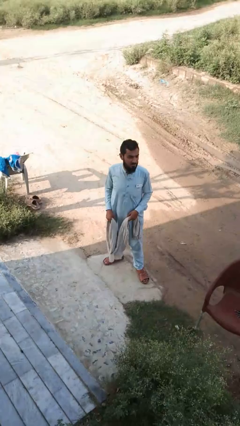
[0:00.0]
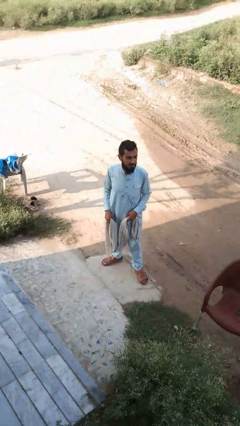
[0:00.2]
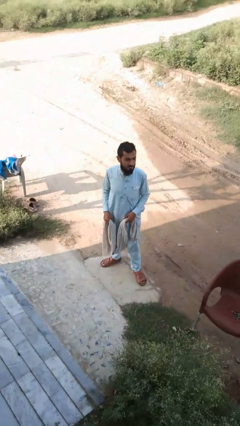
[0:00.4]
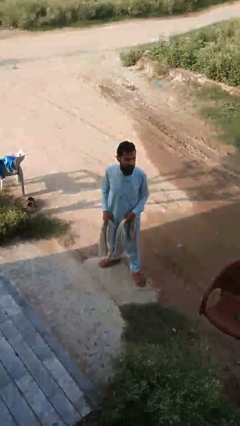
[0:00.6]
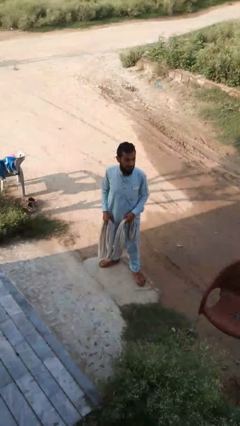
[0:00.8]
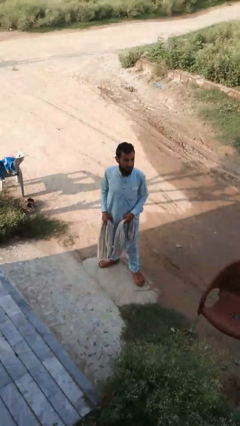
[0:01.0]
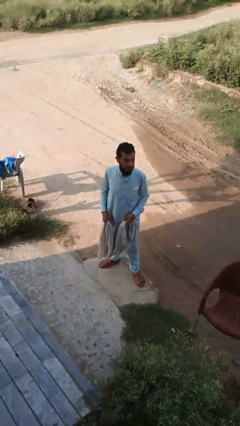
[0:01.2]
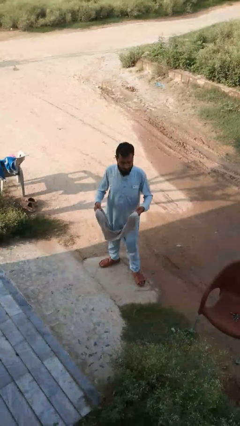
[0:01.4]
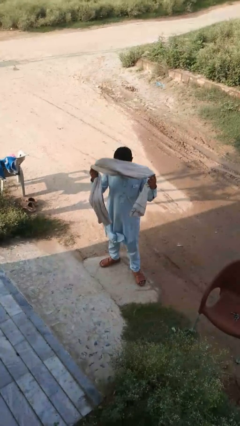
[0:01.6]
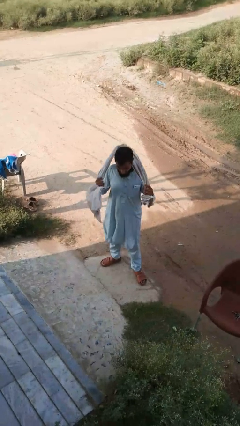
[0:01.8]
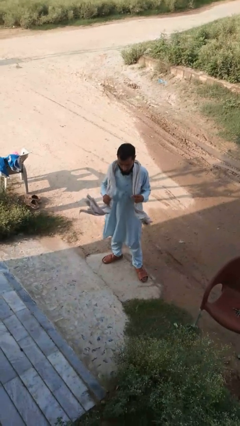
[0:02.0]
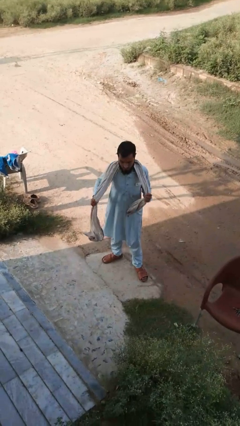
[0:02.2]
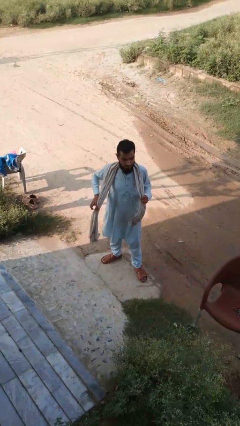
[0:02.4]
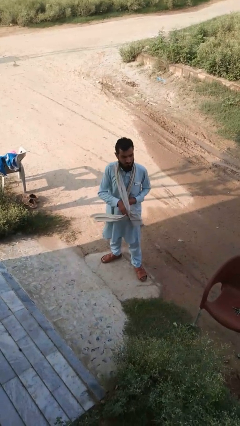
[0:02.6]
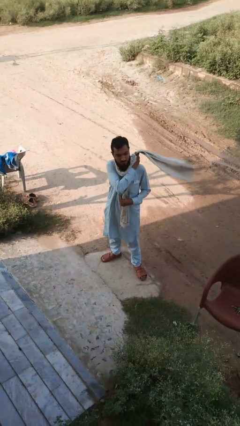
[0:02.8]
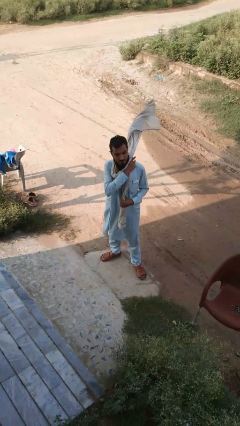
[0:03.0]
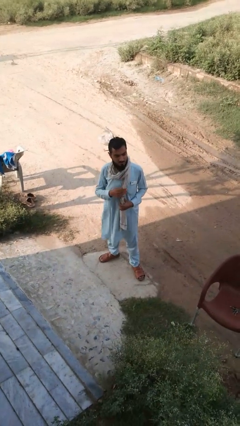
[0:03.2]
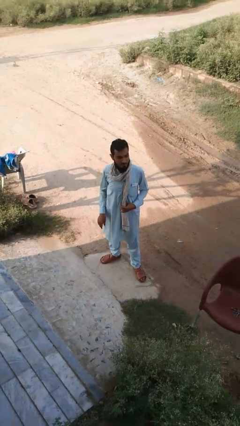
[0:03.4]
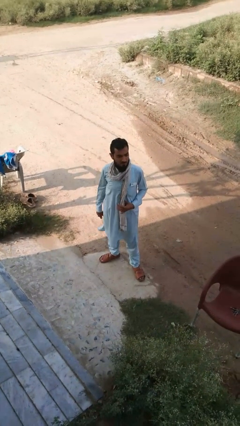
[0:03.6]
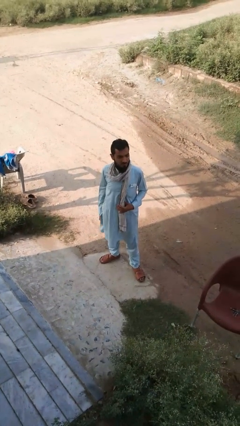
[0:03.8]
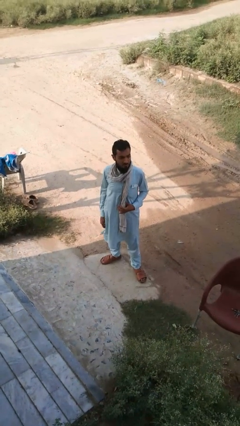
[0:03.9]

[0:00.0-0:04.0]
person puts on scarf

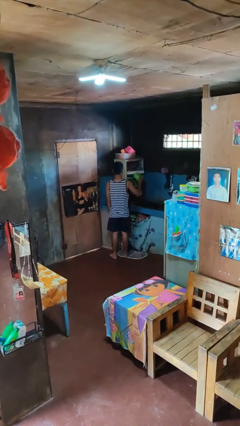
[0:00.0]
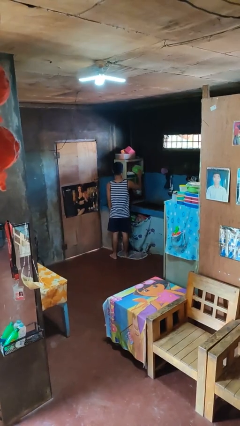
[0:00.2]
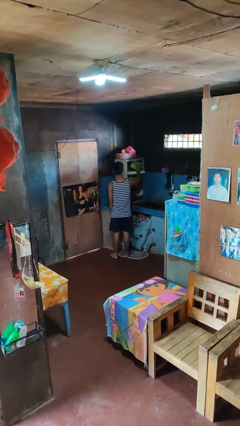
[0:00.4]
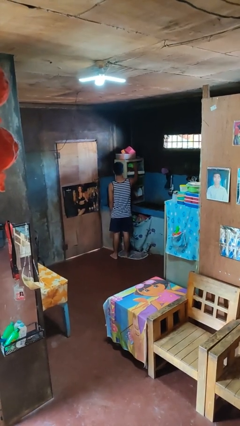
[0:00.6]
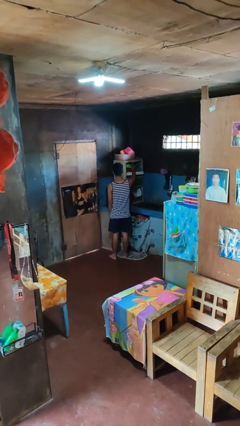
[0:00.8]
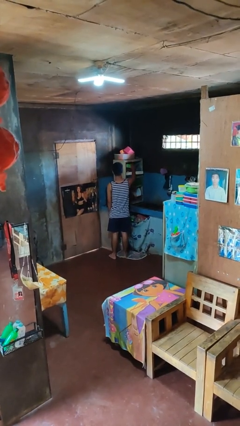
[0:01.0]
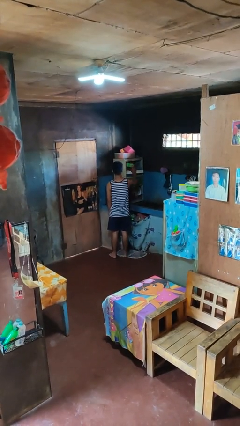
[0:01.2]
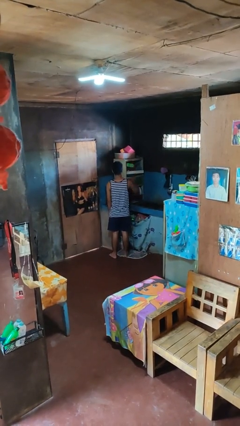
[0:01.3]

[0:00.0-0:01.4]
person puts object in cabinet

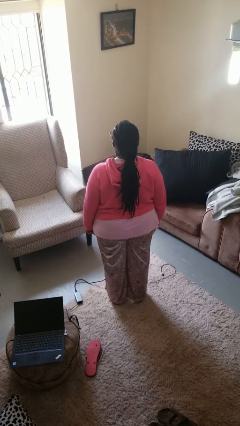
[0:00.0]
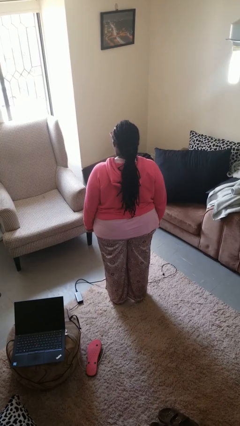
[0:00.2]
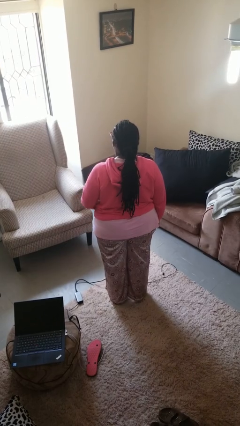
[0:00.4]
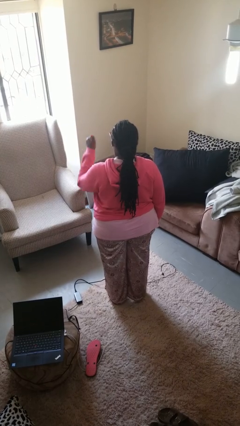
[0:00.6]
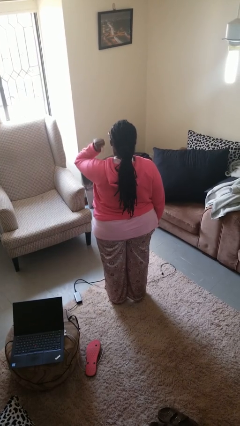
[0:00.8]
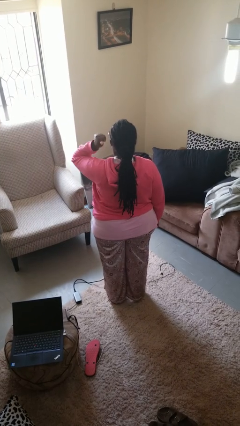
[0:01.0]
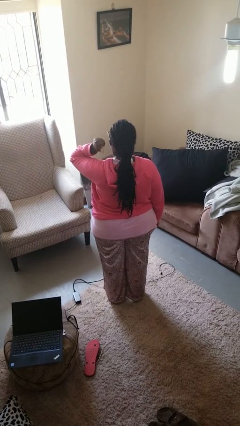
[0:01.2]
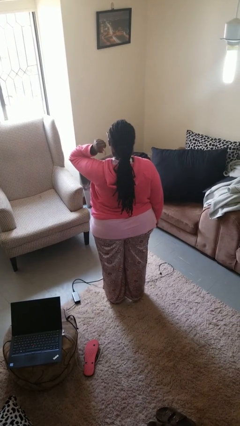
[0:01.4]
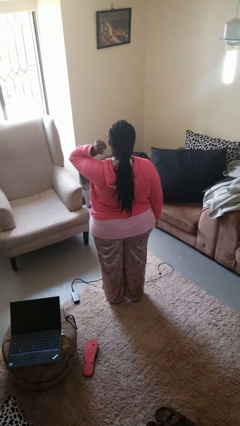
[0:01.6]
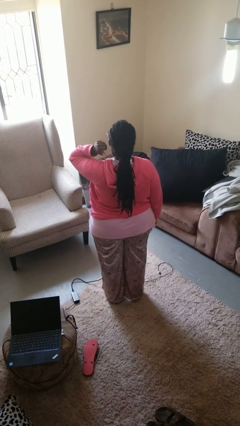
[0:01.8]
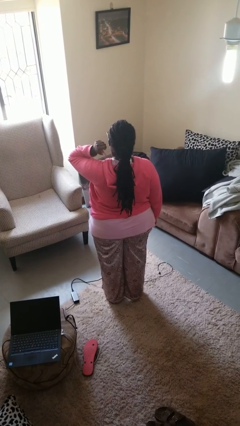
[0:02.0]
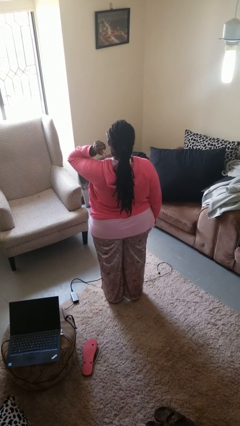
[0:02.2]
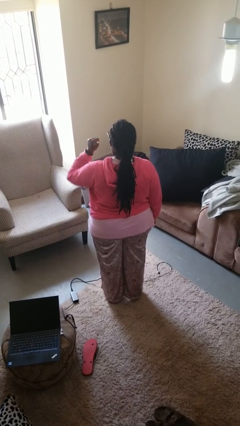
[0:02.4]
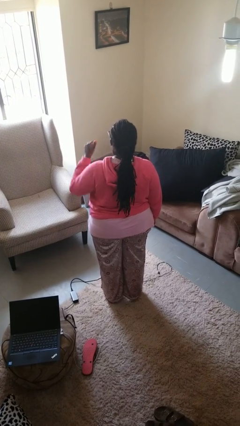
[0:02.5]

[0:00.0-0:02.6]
person gestures behind me

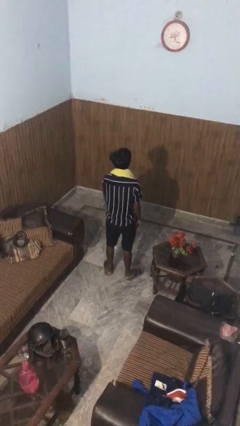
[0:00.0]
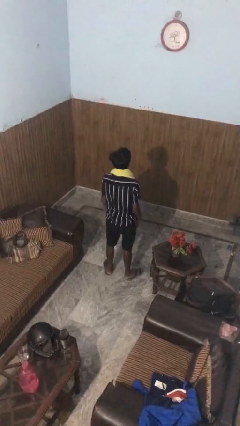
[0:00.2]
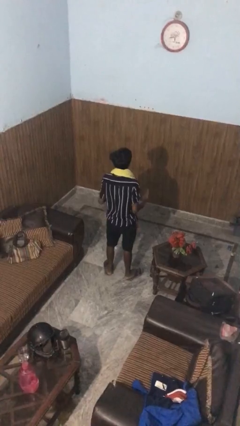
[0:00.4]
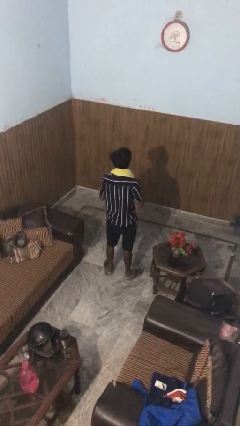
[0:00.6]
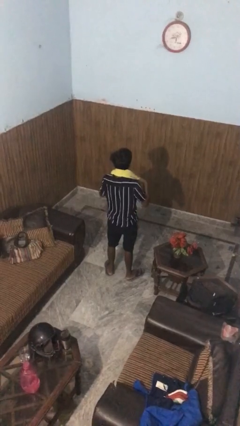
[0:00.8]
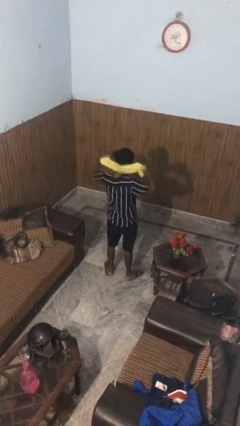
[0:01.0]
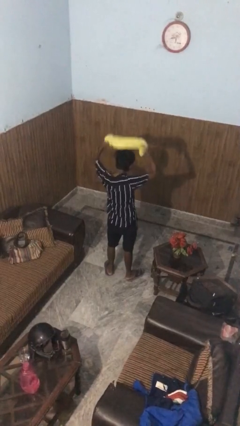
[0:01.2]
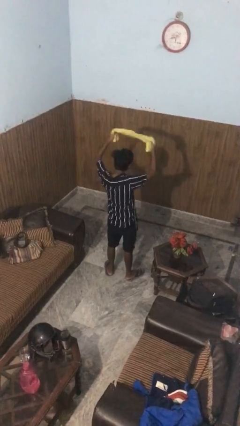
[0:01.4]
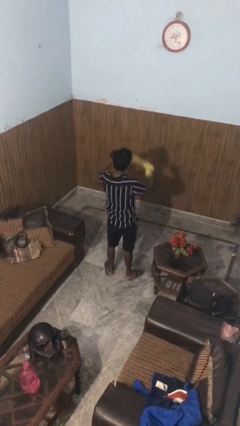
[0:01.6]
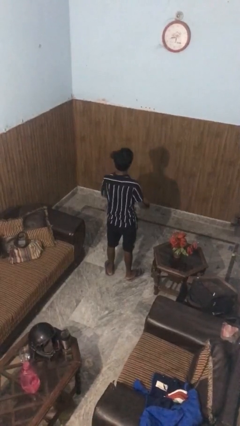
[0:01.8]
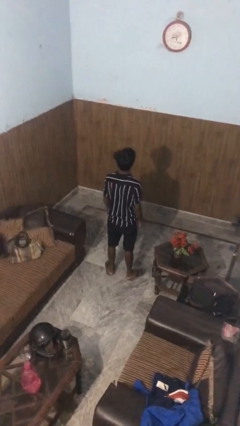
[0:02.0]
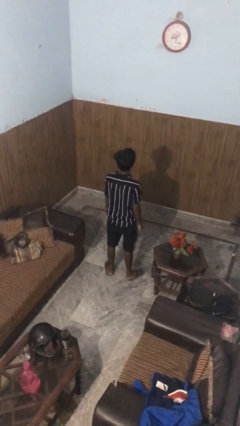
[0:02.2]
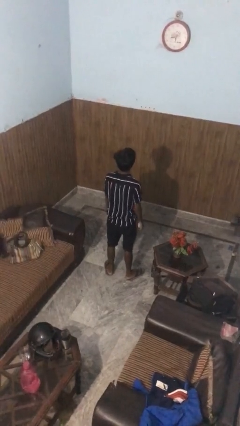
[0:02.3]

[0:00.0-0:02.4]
person takes off scarf

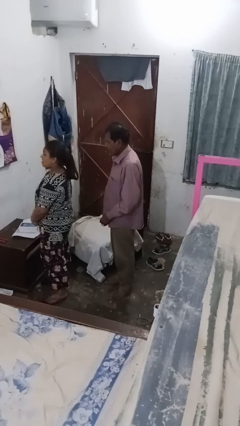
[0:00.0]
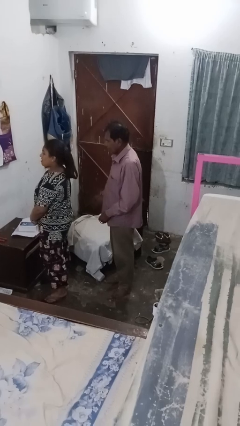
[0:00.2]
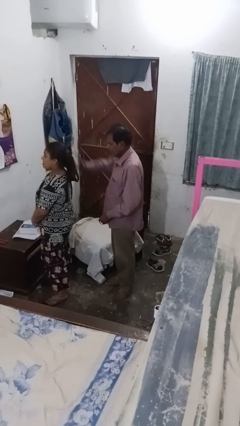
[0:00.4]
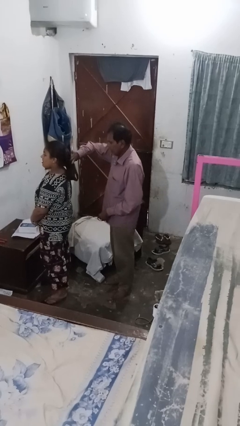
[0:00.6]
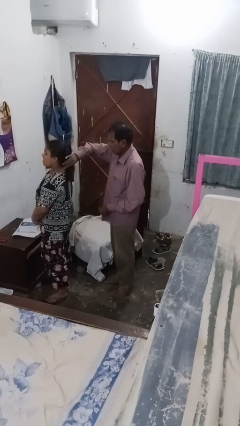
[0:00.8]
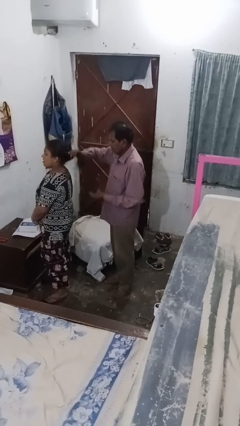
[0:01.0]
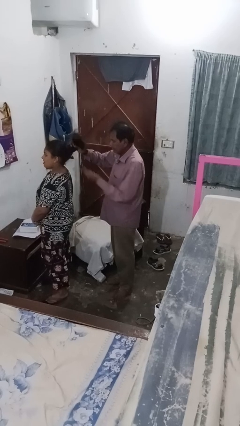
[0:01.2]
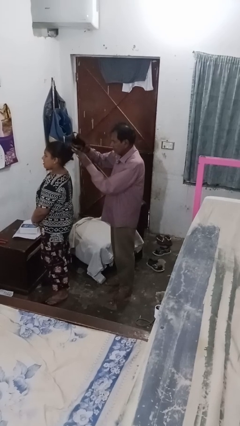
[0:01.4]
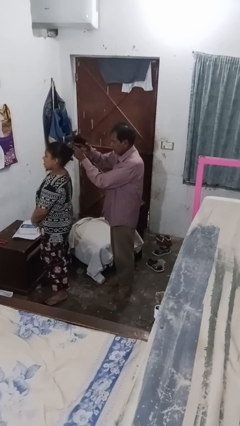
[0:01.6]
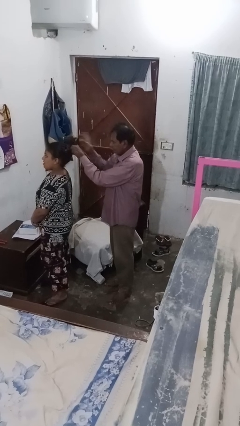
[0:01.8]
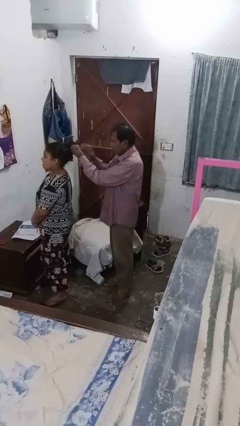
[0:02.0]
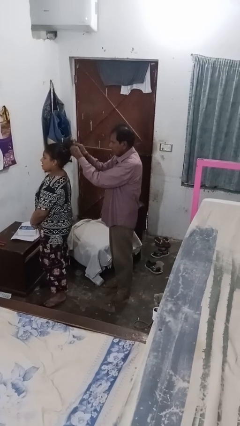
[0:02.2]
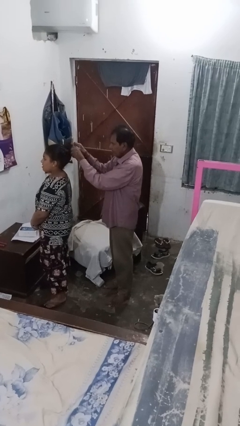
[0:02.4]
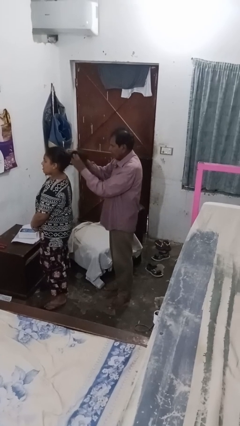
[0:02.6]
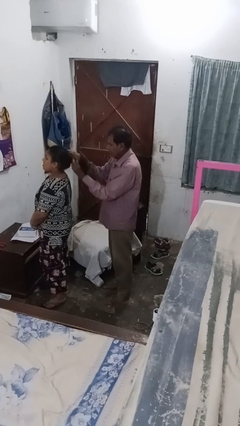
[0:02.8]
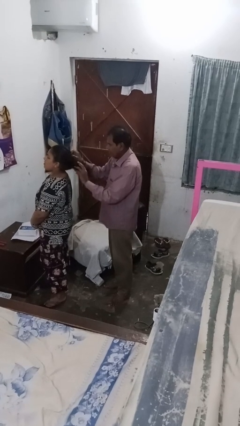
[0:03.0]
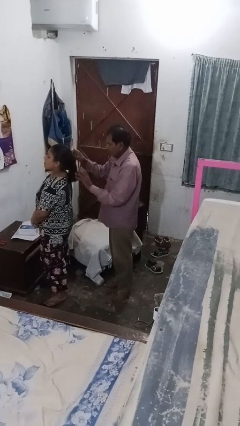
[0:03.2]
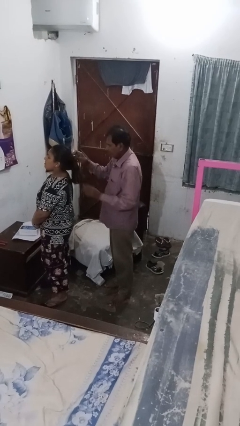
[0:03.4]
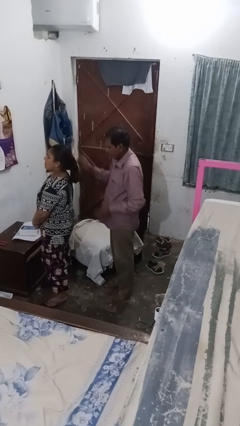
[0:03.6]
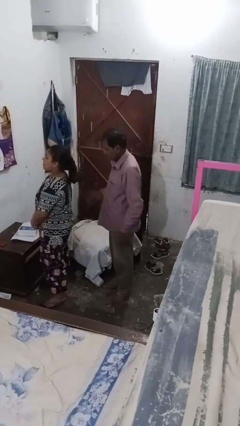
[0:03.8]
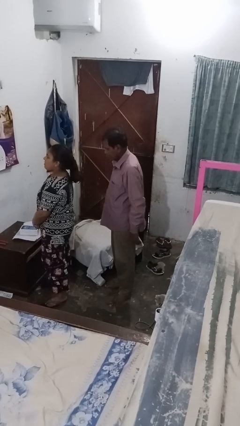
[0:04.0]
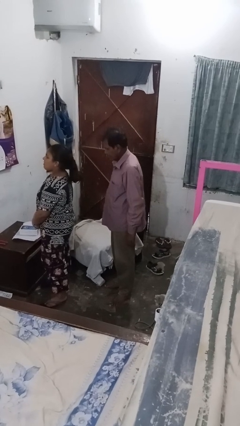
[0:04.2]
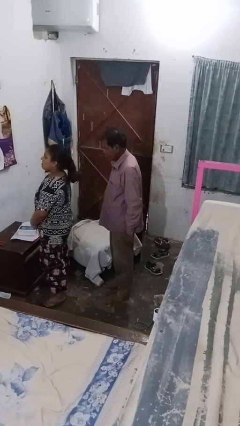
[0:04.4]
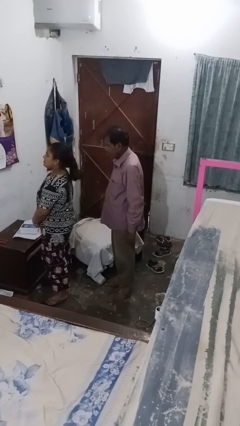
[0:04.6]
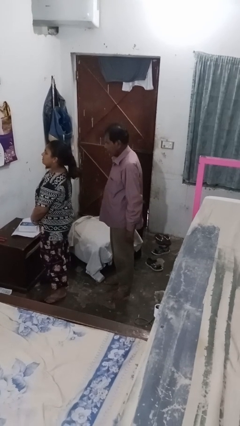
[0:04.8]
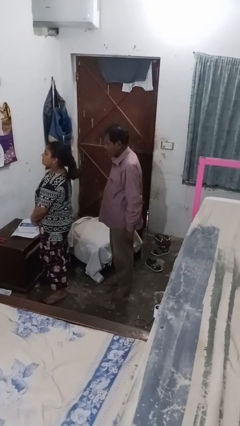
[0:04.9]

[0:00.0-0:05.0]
person braids hair of person

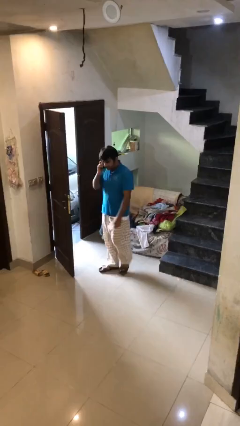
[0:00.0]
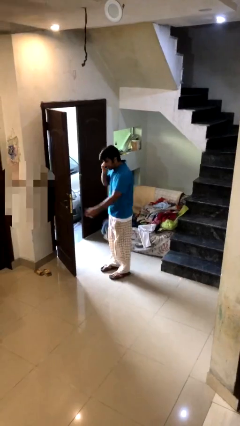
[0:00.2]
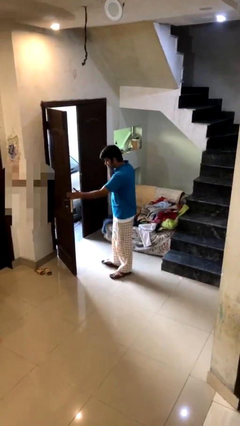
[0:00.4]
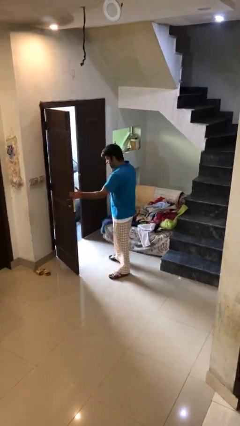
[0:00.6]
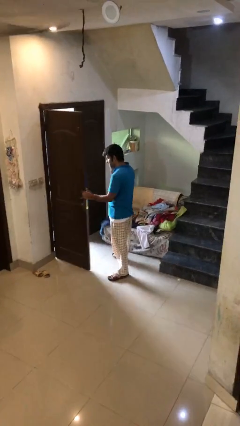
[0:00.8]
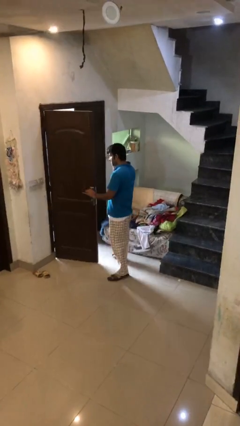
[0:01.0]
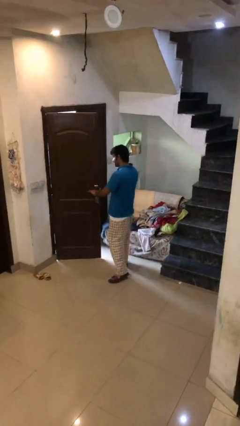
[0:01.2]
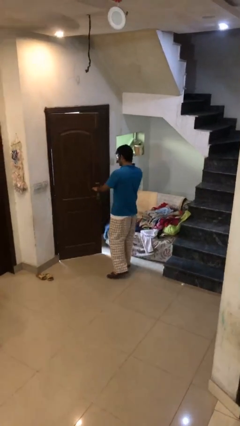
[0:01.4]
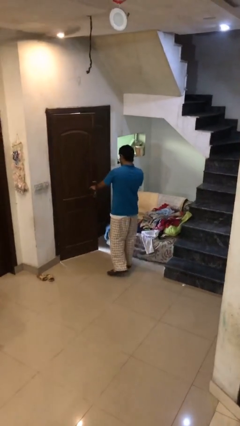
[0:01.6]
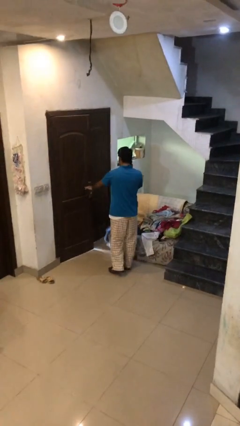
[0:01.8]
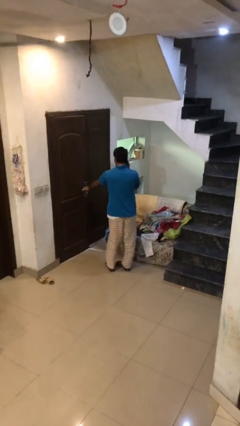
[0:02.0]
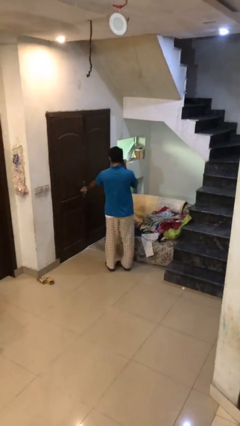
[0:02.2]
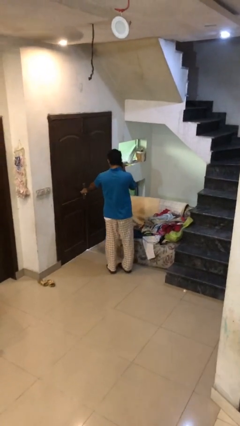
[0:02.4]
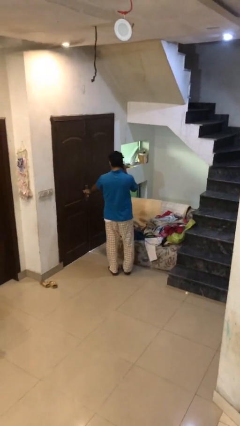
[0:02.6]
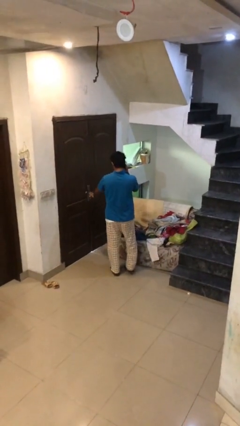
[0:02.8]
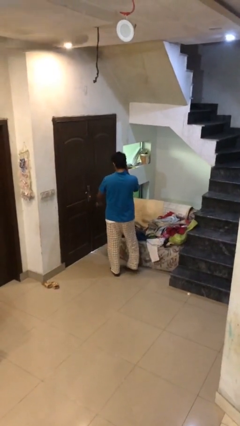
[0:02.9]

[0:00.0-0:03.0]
person closes facility door
